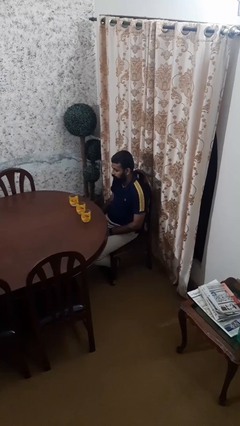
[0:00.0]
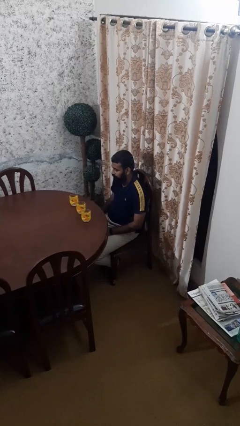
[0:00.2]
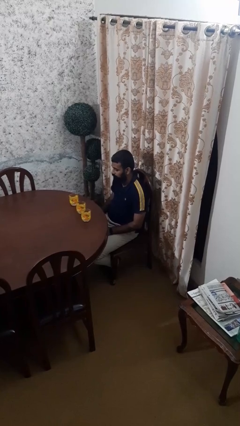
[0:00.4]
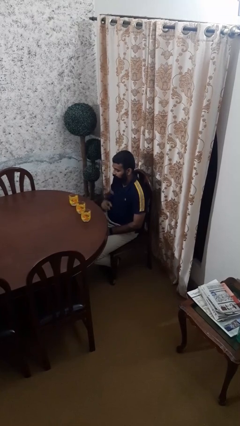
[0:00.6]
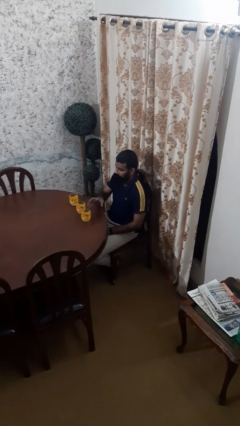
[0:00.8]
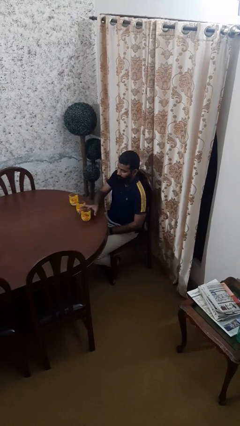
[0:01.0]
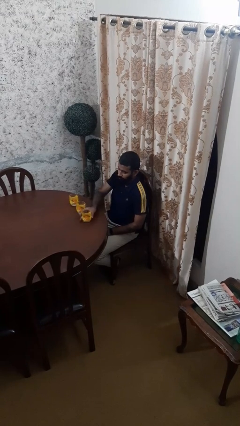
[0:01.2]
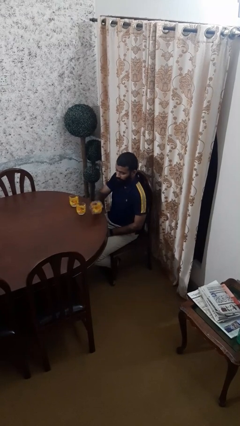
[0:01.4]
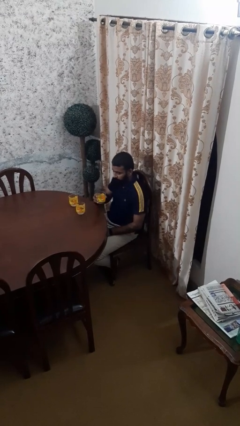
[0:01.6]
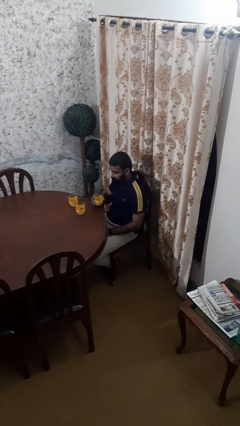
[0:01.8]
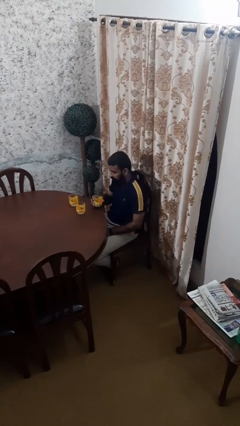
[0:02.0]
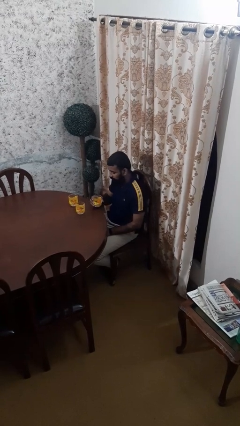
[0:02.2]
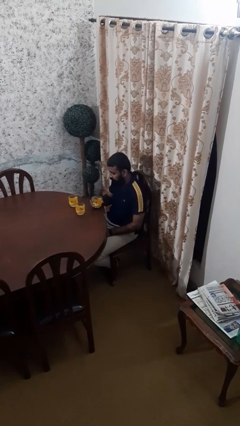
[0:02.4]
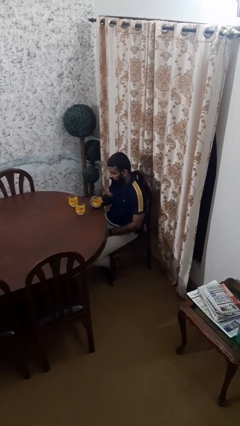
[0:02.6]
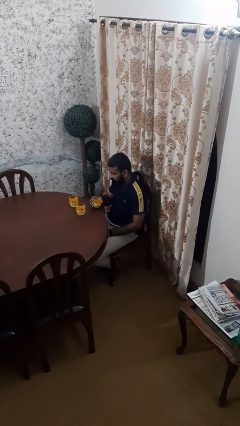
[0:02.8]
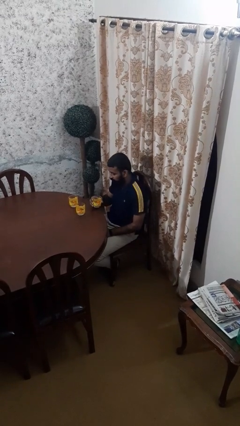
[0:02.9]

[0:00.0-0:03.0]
person picks up object from table

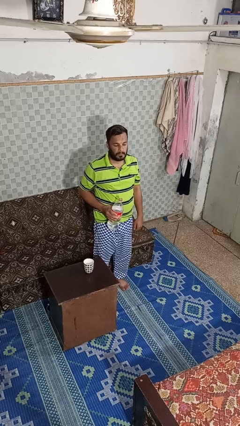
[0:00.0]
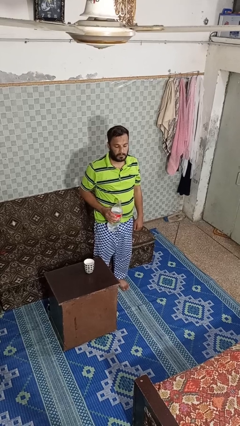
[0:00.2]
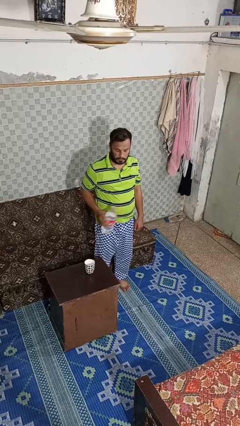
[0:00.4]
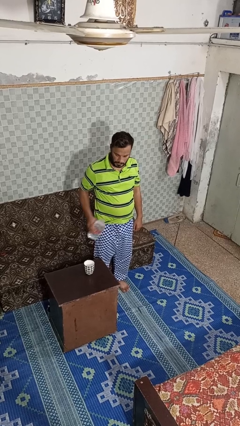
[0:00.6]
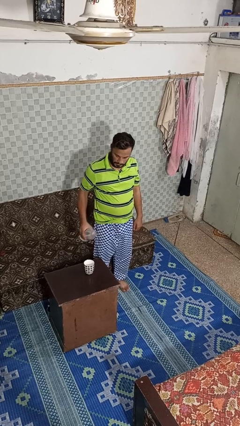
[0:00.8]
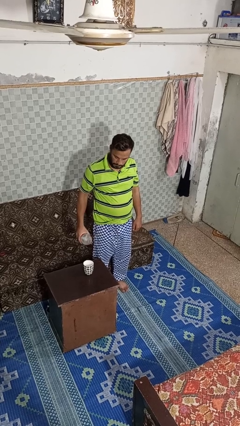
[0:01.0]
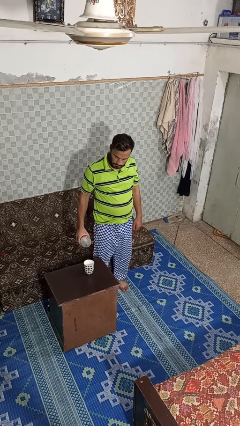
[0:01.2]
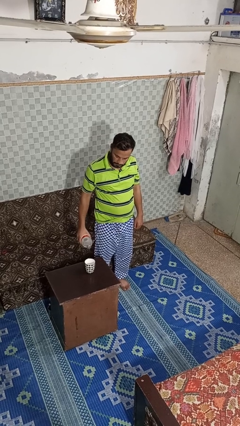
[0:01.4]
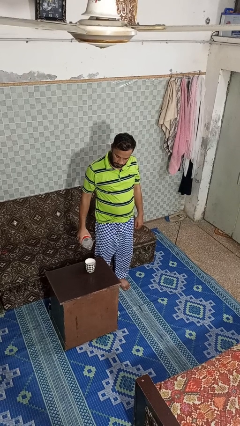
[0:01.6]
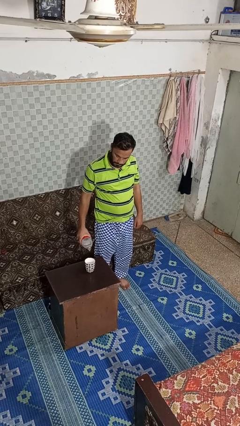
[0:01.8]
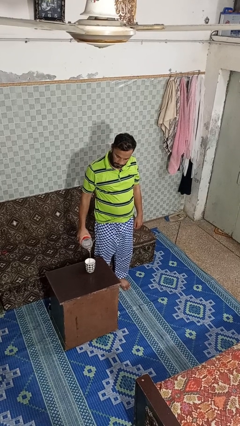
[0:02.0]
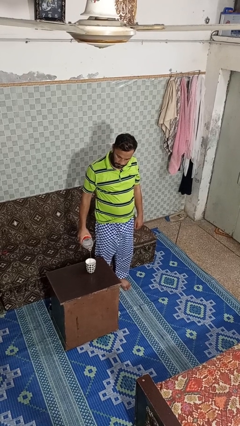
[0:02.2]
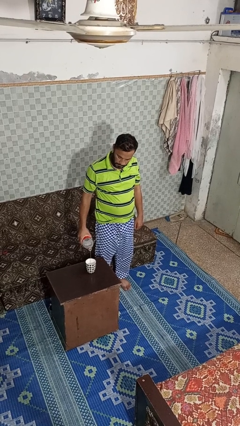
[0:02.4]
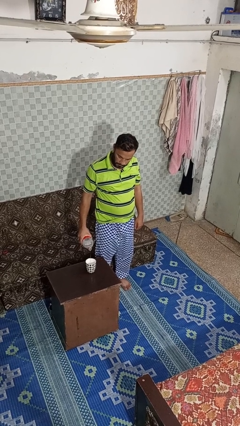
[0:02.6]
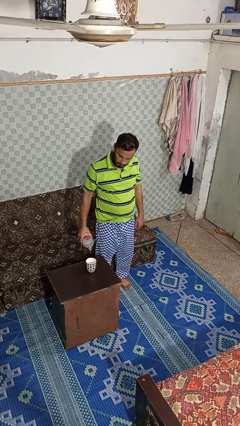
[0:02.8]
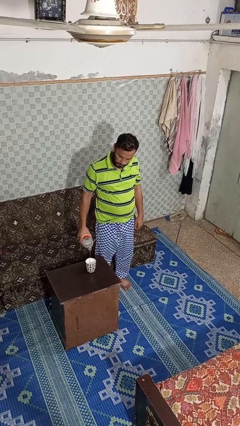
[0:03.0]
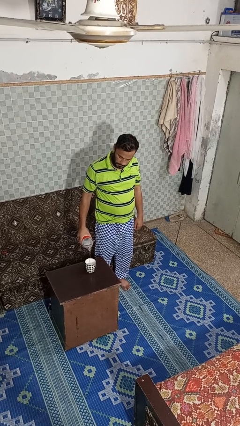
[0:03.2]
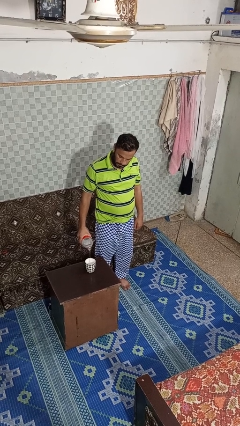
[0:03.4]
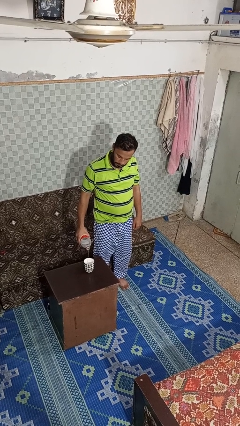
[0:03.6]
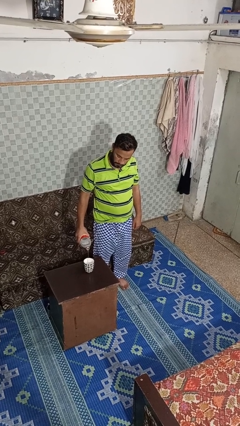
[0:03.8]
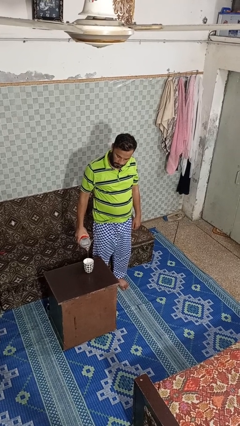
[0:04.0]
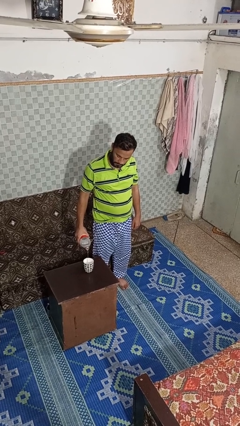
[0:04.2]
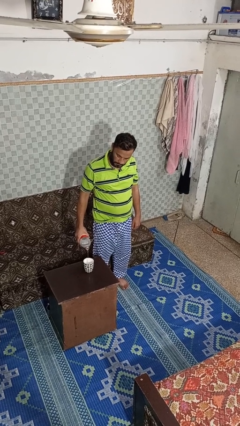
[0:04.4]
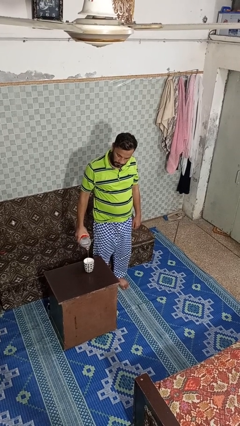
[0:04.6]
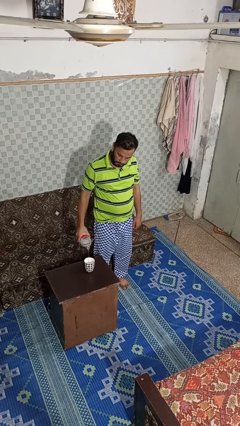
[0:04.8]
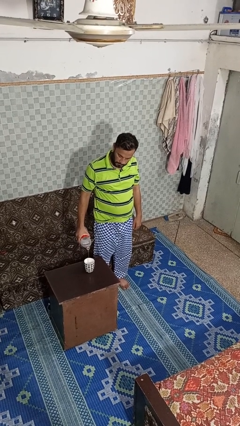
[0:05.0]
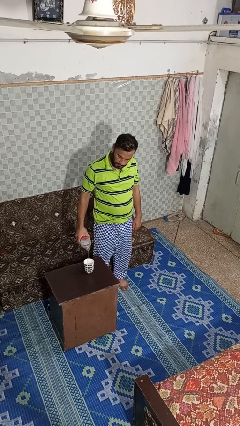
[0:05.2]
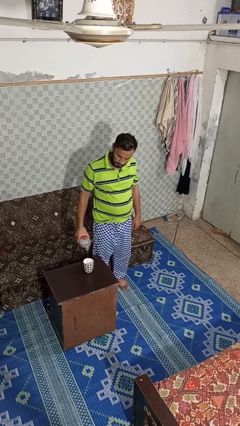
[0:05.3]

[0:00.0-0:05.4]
person pours liquid into cup

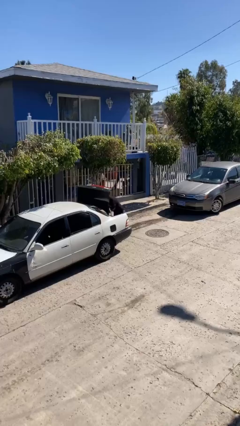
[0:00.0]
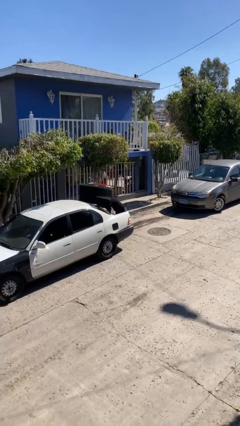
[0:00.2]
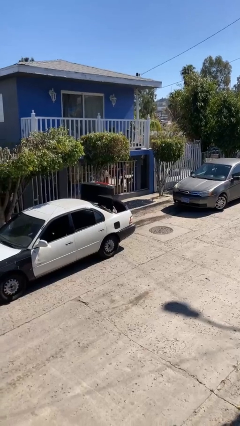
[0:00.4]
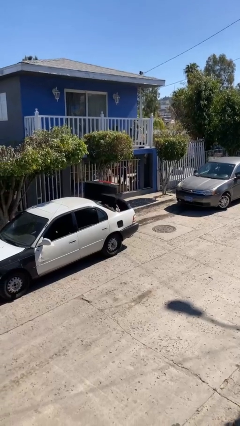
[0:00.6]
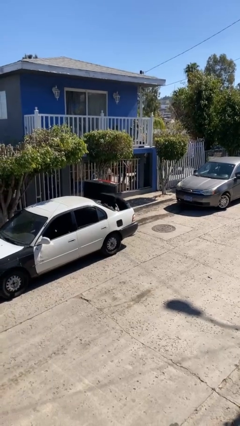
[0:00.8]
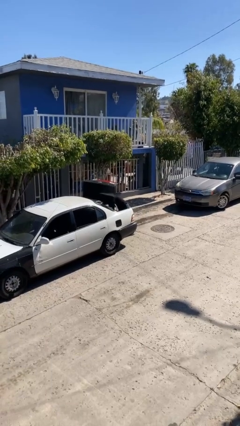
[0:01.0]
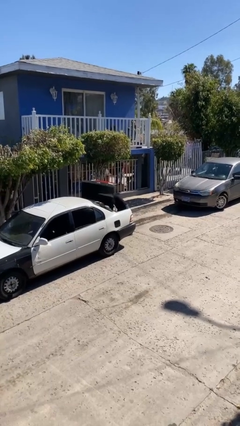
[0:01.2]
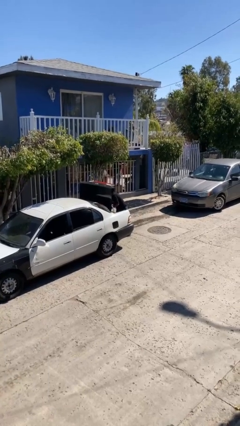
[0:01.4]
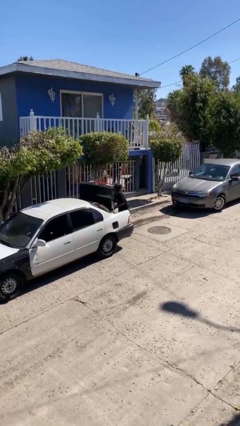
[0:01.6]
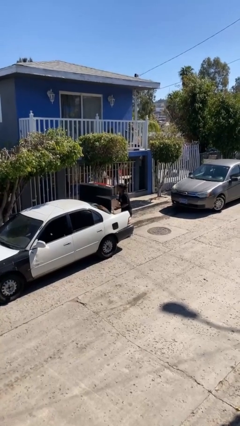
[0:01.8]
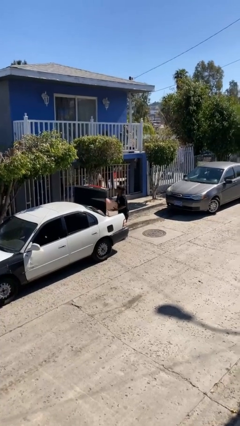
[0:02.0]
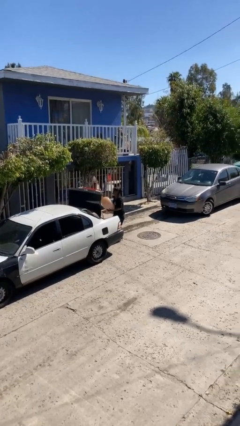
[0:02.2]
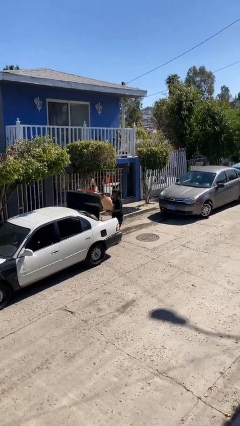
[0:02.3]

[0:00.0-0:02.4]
person unloads car

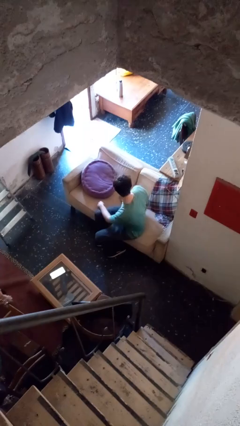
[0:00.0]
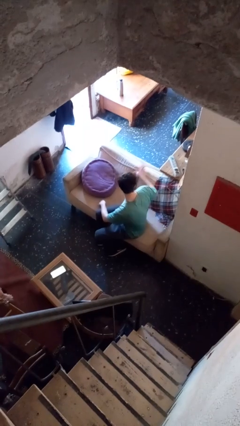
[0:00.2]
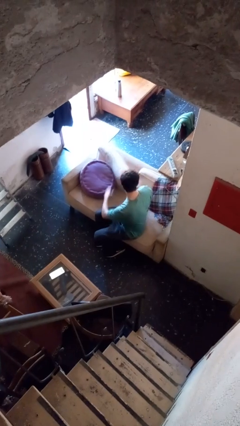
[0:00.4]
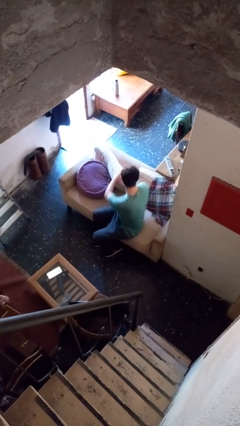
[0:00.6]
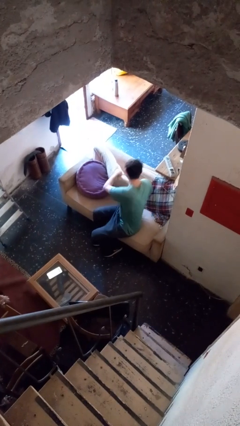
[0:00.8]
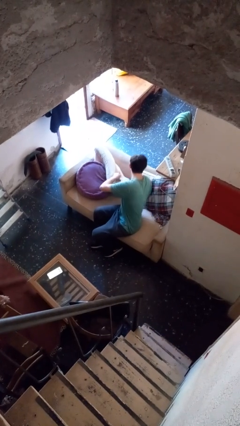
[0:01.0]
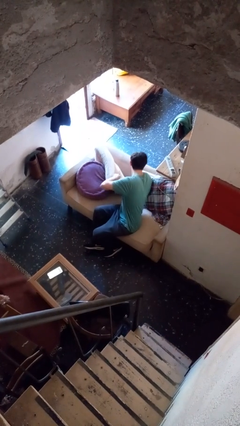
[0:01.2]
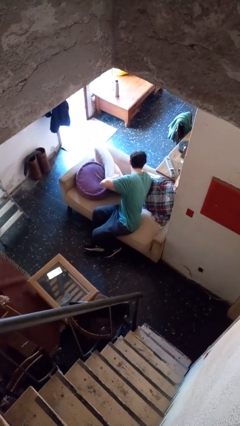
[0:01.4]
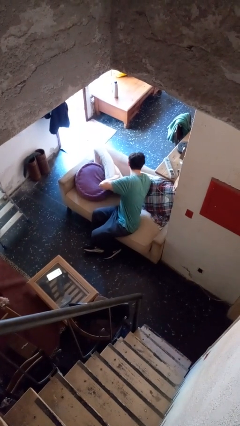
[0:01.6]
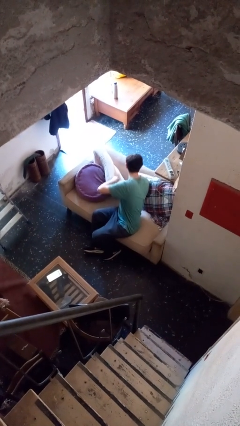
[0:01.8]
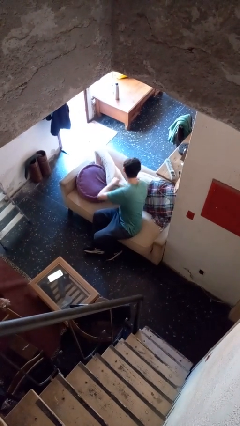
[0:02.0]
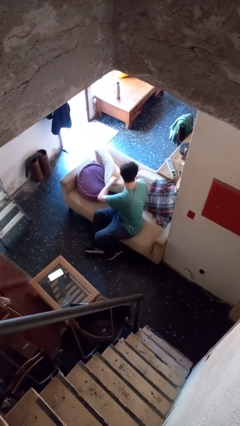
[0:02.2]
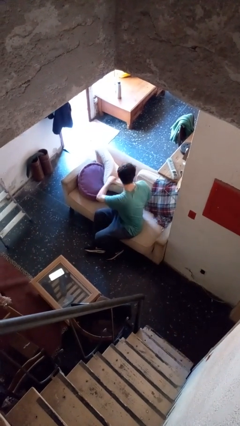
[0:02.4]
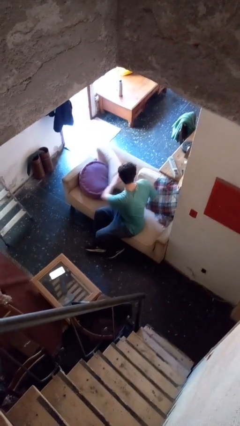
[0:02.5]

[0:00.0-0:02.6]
person searches in couch

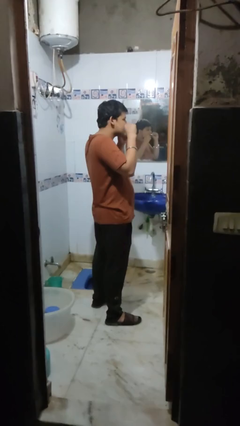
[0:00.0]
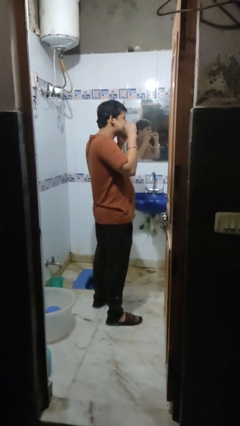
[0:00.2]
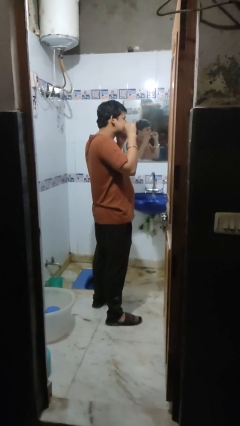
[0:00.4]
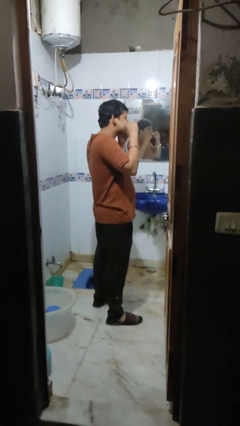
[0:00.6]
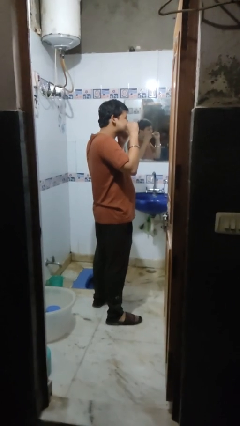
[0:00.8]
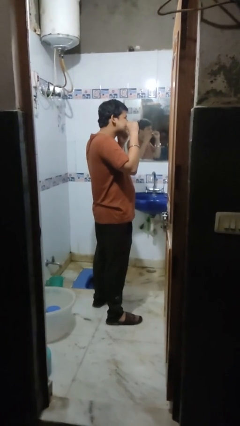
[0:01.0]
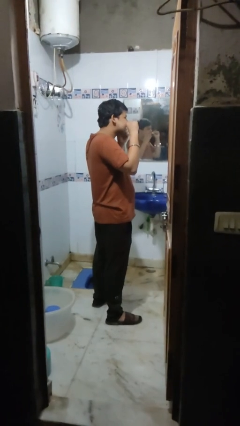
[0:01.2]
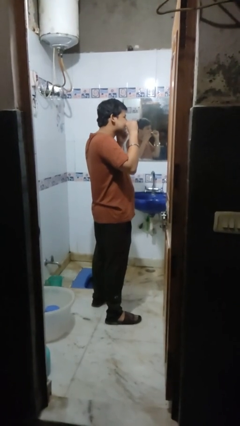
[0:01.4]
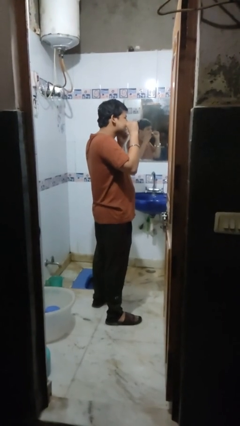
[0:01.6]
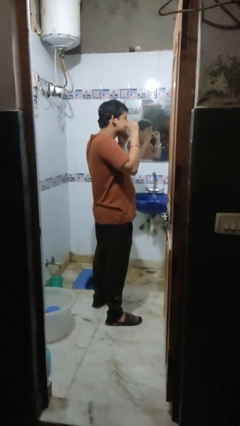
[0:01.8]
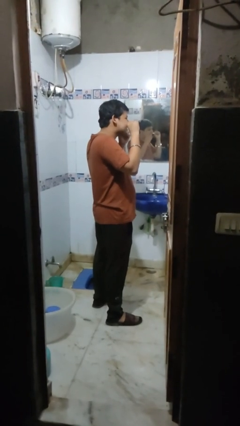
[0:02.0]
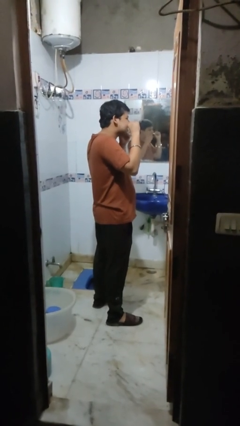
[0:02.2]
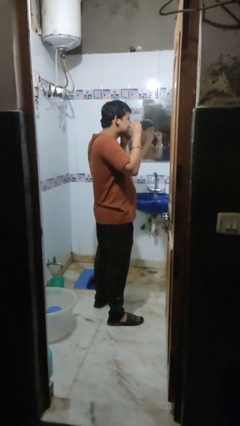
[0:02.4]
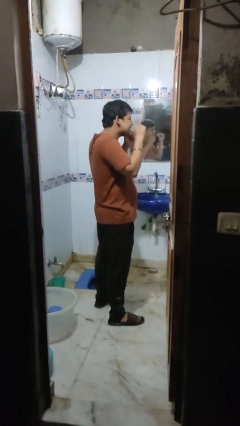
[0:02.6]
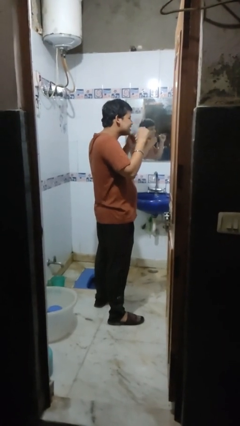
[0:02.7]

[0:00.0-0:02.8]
person flosses

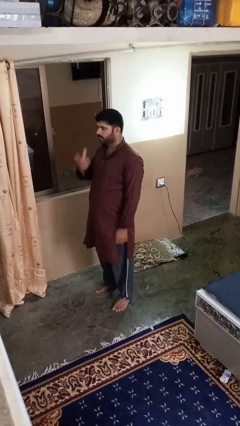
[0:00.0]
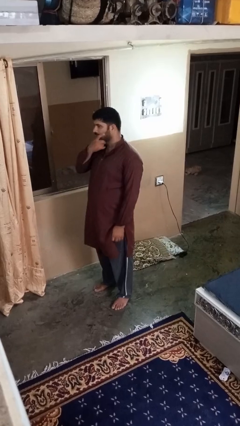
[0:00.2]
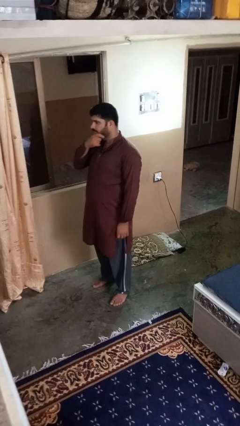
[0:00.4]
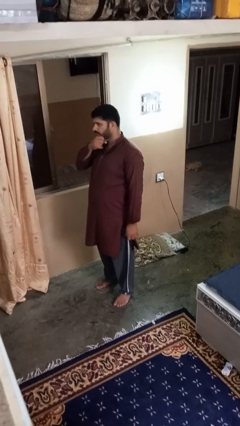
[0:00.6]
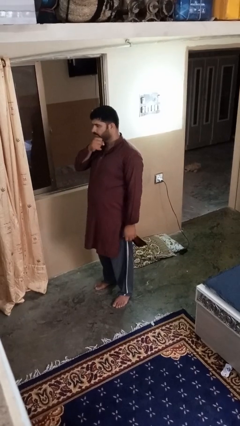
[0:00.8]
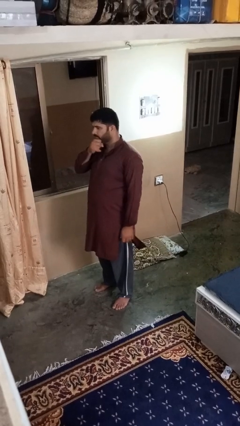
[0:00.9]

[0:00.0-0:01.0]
person strokes chin

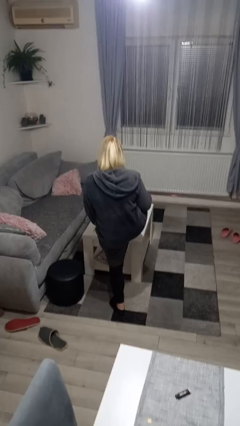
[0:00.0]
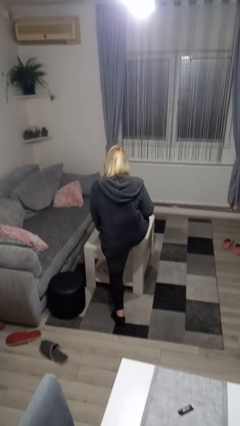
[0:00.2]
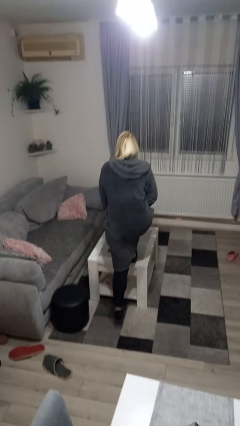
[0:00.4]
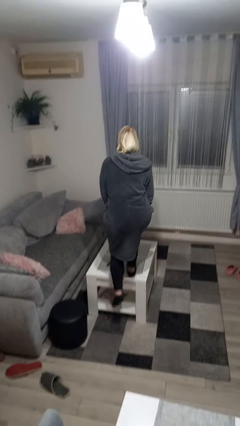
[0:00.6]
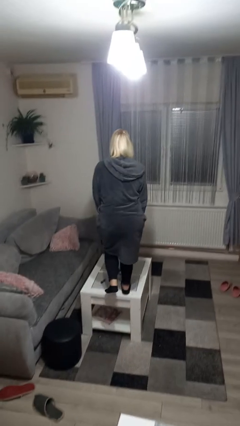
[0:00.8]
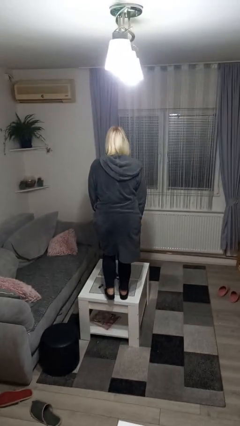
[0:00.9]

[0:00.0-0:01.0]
person climbs on table
